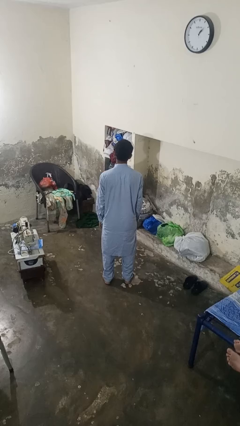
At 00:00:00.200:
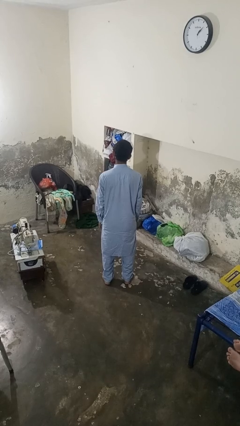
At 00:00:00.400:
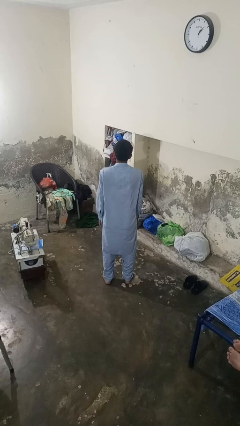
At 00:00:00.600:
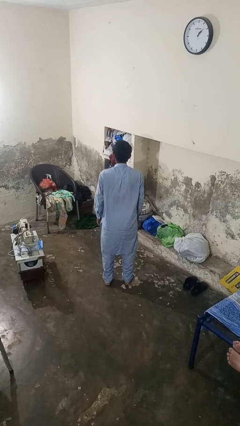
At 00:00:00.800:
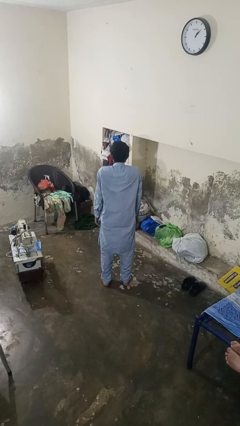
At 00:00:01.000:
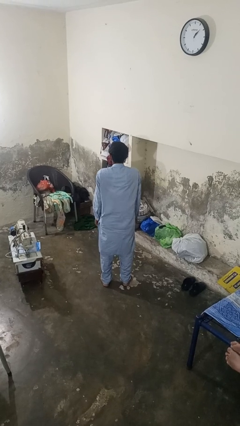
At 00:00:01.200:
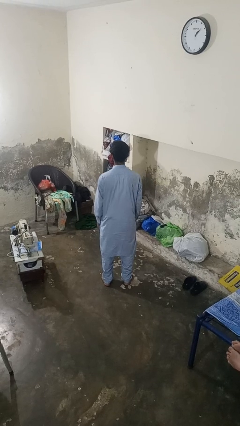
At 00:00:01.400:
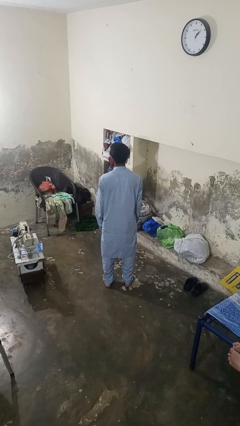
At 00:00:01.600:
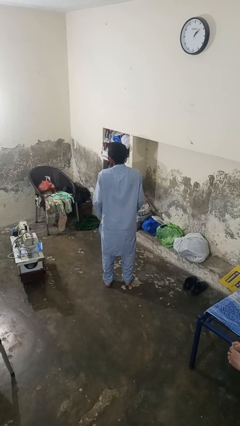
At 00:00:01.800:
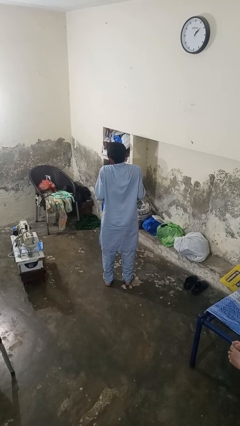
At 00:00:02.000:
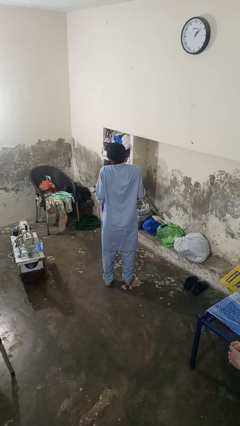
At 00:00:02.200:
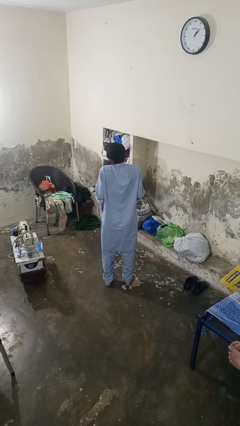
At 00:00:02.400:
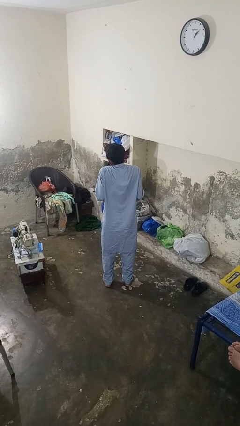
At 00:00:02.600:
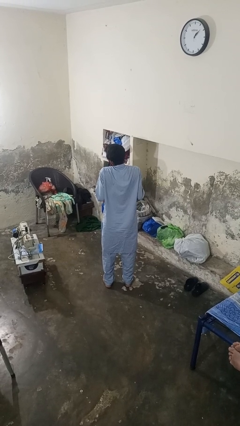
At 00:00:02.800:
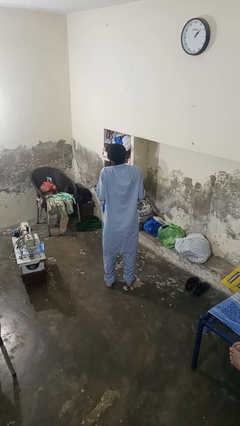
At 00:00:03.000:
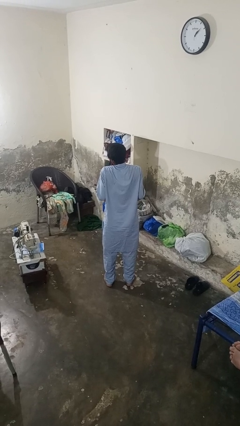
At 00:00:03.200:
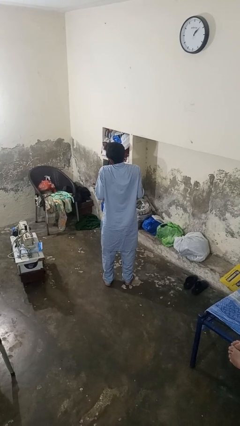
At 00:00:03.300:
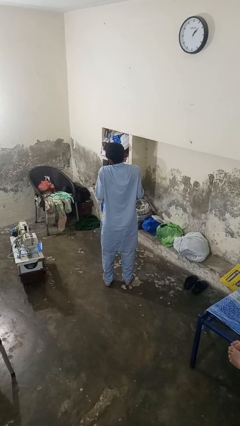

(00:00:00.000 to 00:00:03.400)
person shrugs

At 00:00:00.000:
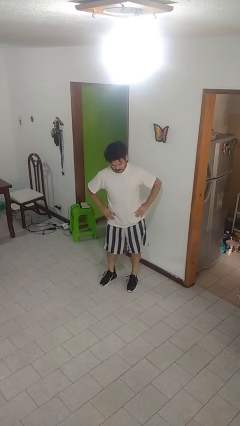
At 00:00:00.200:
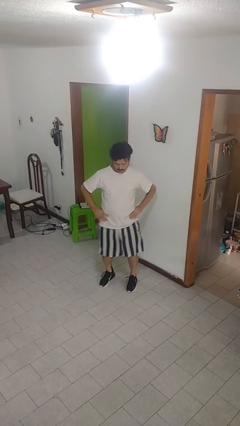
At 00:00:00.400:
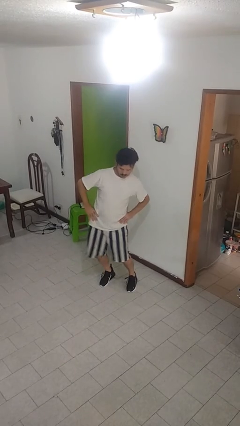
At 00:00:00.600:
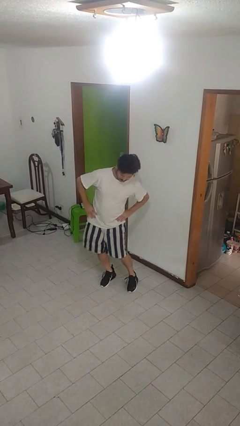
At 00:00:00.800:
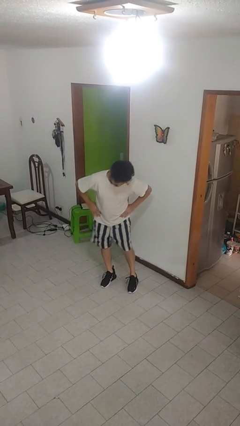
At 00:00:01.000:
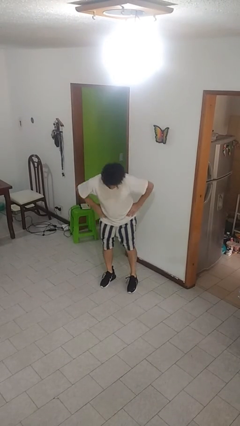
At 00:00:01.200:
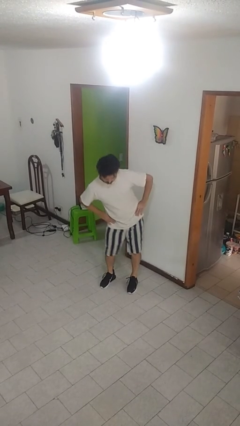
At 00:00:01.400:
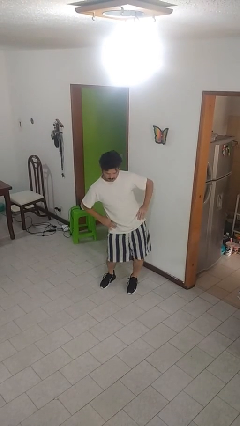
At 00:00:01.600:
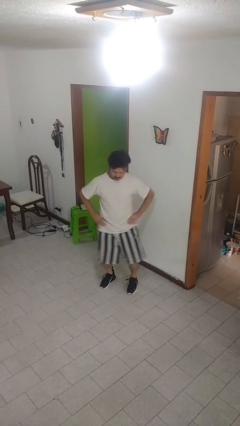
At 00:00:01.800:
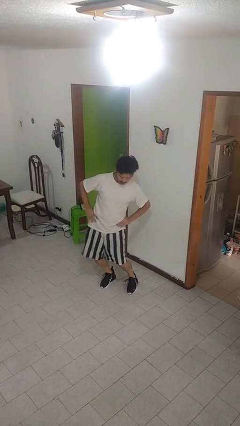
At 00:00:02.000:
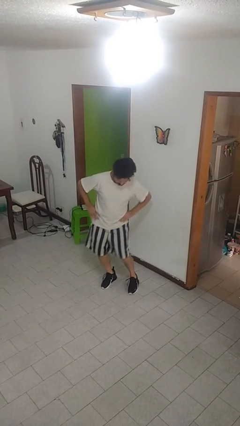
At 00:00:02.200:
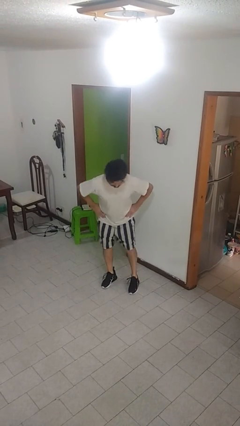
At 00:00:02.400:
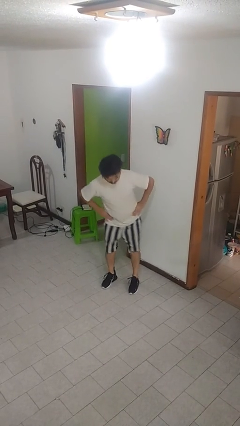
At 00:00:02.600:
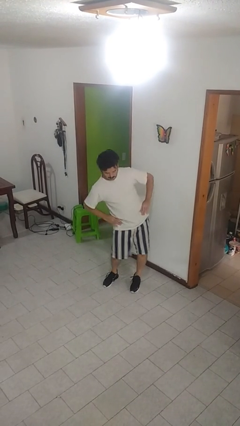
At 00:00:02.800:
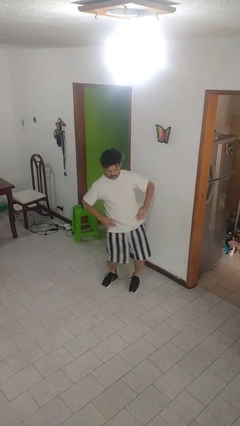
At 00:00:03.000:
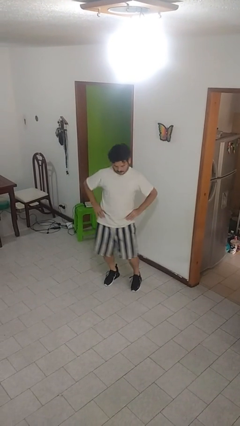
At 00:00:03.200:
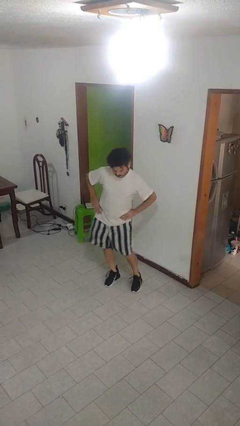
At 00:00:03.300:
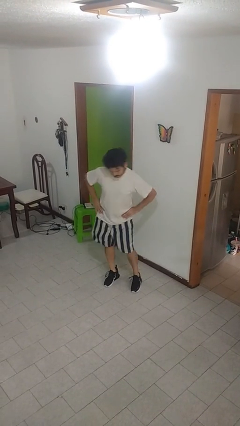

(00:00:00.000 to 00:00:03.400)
person wiggles hips

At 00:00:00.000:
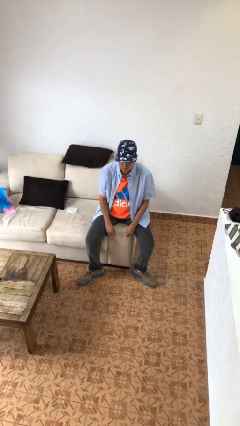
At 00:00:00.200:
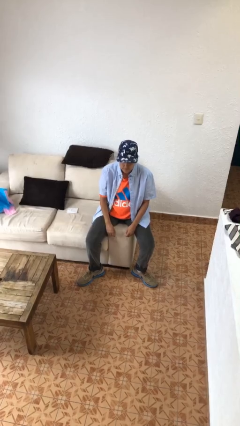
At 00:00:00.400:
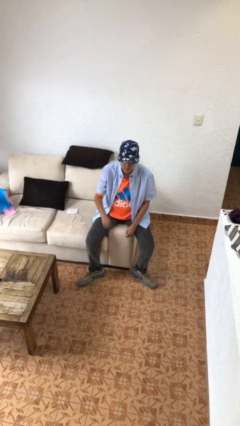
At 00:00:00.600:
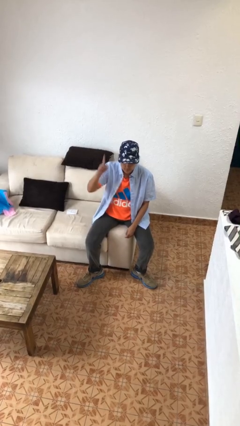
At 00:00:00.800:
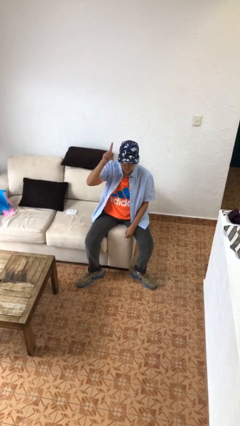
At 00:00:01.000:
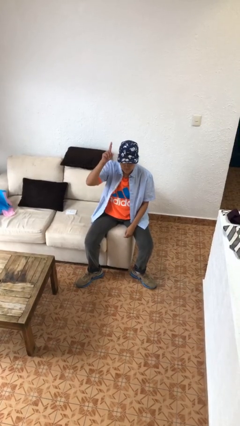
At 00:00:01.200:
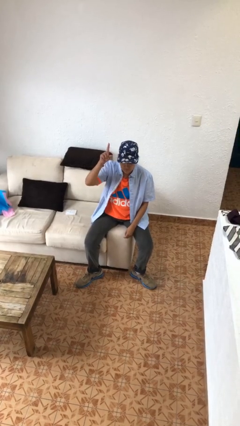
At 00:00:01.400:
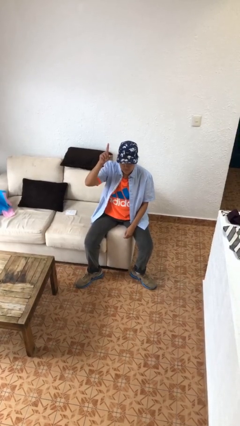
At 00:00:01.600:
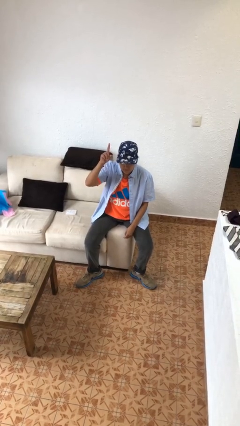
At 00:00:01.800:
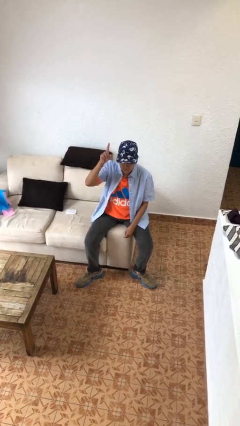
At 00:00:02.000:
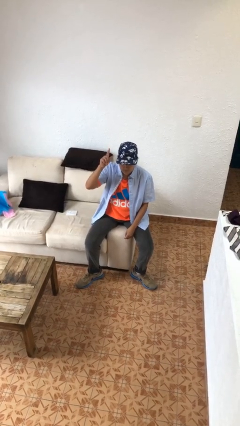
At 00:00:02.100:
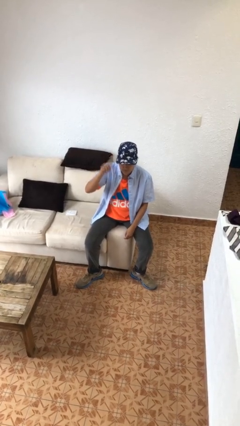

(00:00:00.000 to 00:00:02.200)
person gestures number one

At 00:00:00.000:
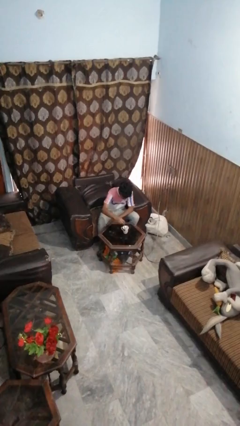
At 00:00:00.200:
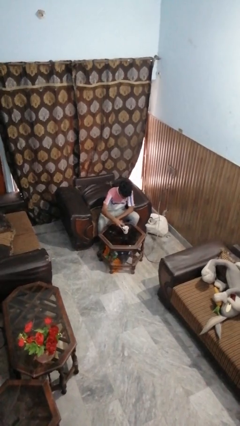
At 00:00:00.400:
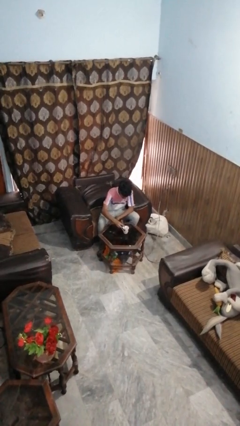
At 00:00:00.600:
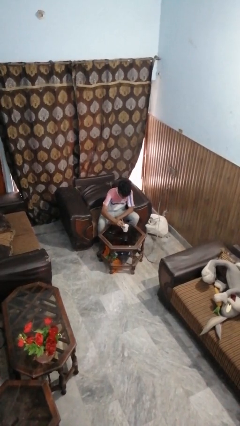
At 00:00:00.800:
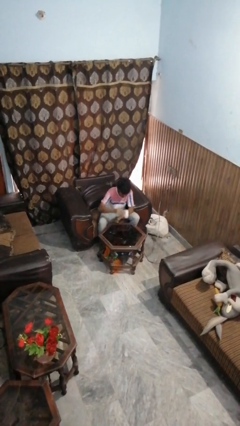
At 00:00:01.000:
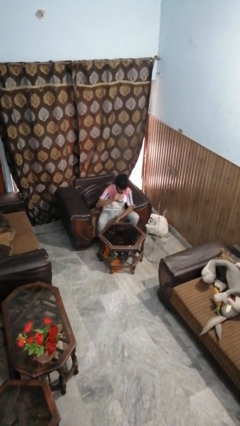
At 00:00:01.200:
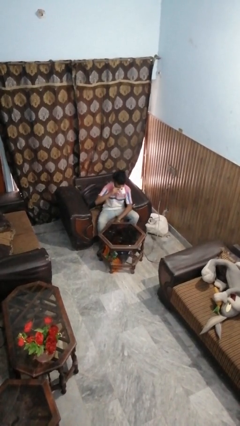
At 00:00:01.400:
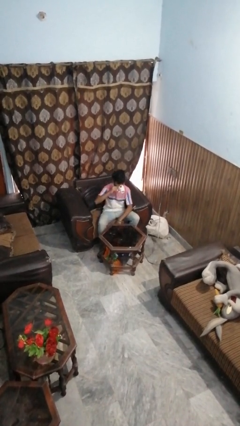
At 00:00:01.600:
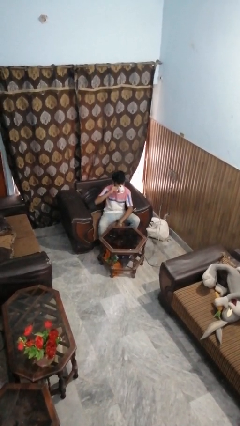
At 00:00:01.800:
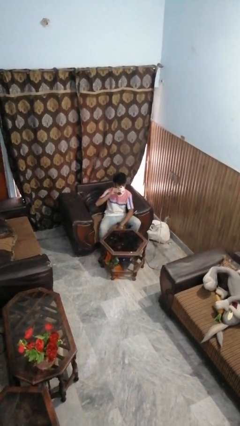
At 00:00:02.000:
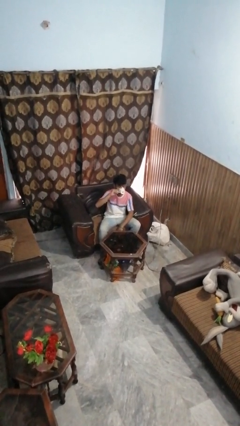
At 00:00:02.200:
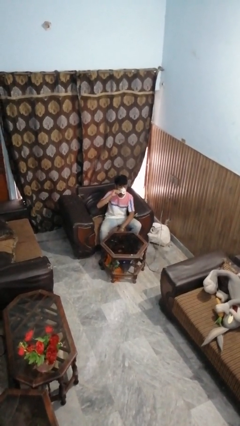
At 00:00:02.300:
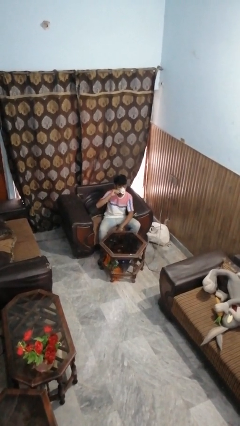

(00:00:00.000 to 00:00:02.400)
person drinks from mug

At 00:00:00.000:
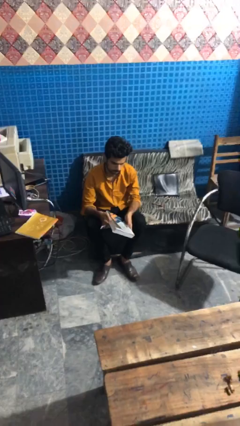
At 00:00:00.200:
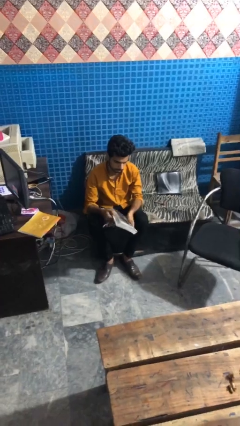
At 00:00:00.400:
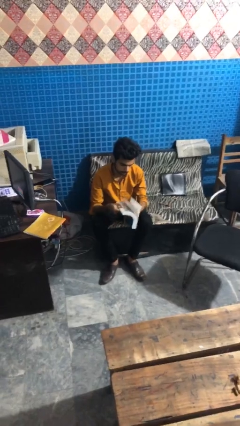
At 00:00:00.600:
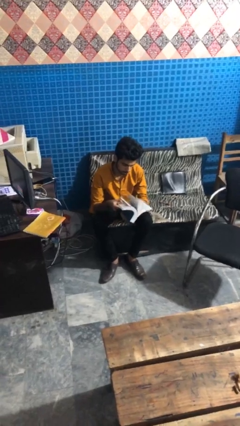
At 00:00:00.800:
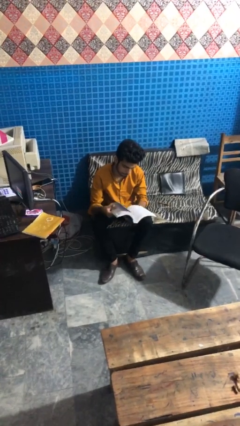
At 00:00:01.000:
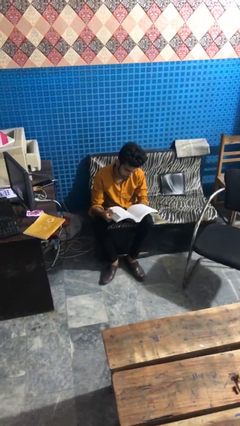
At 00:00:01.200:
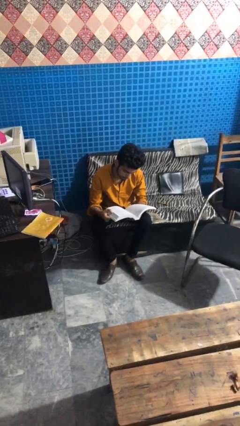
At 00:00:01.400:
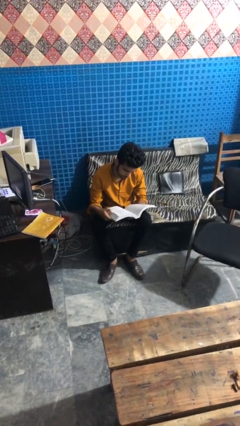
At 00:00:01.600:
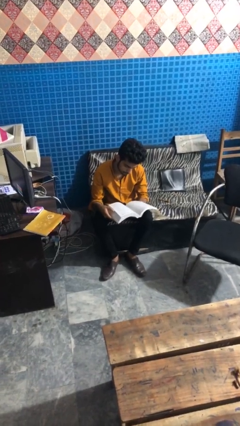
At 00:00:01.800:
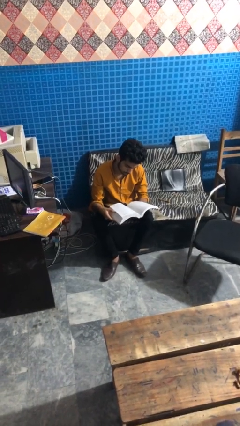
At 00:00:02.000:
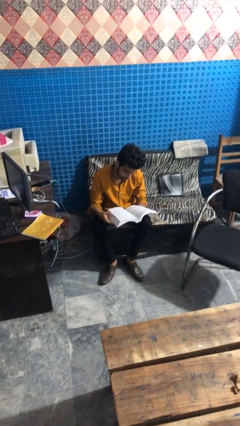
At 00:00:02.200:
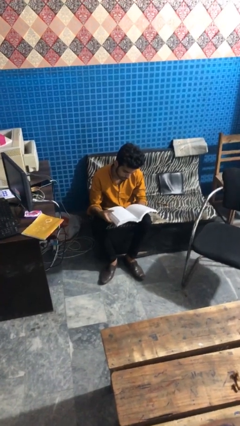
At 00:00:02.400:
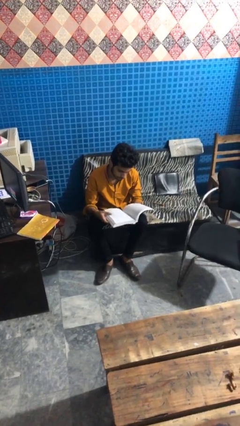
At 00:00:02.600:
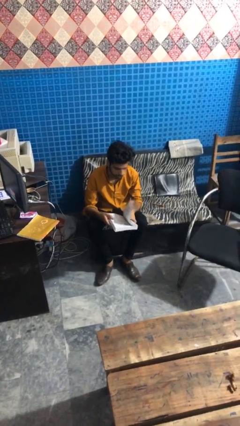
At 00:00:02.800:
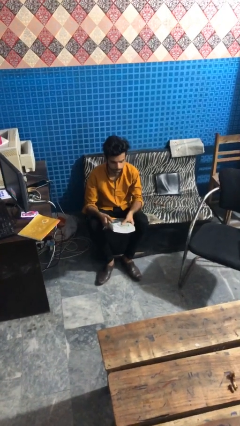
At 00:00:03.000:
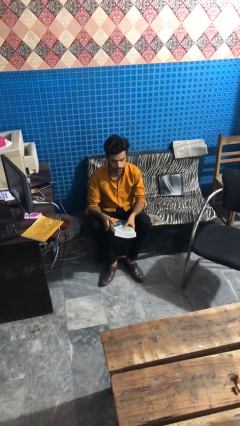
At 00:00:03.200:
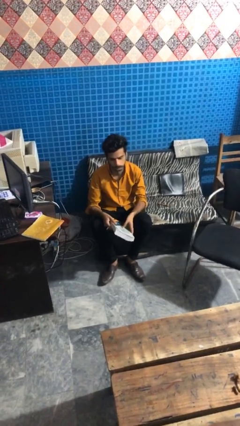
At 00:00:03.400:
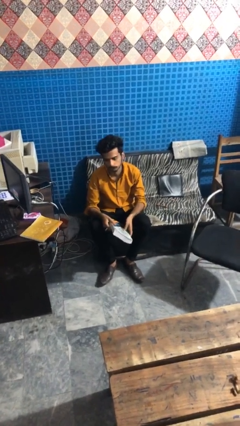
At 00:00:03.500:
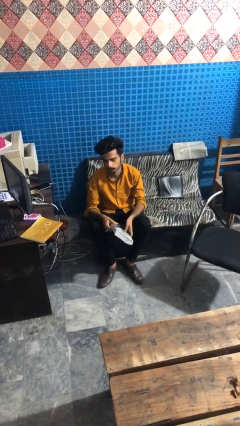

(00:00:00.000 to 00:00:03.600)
person reads book

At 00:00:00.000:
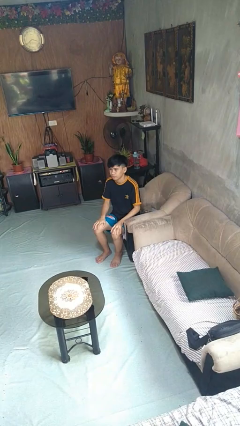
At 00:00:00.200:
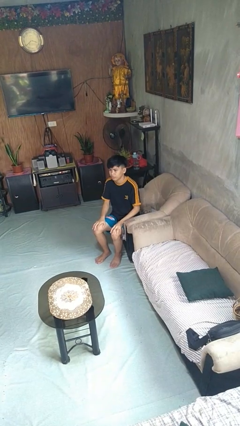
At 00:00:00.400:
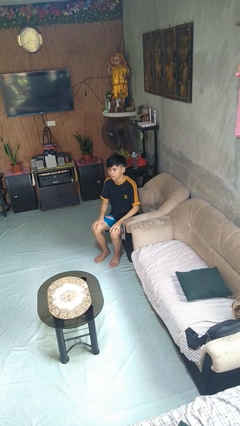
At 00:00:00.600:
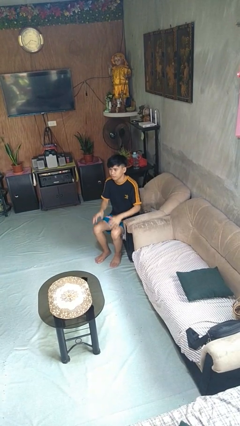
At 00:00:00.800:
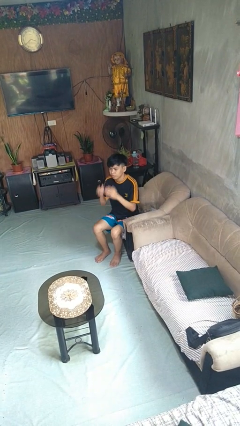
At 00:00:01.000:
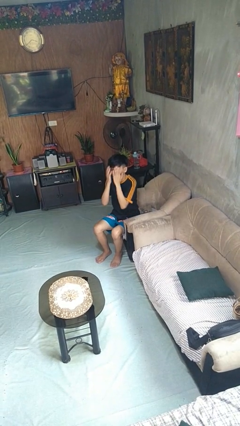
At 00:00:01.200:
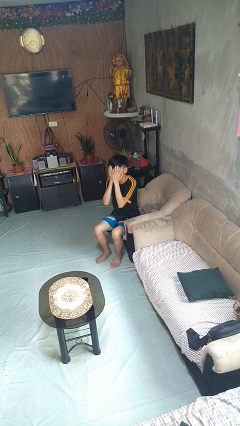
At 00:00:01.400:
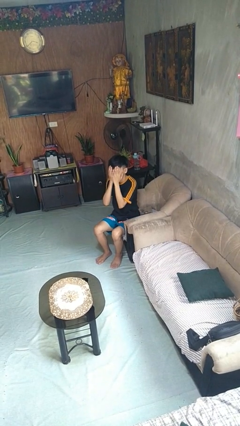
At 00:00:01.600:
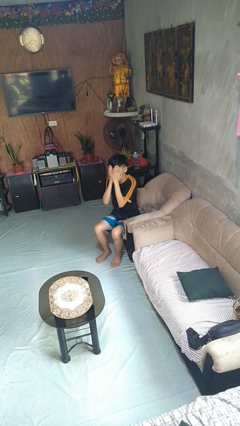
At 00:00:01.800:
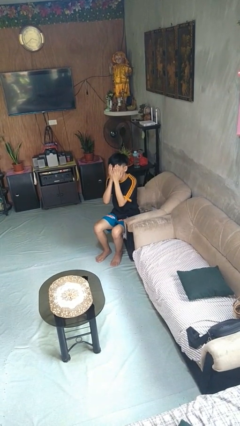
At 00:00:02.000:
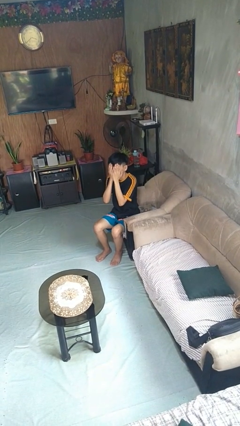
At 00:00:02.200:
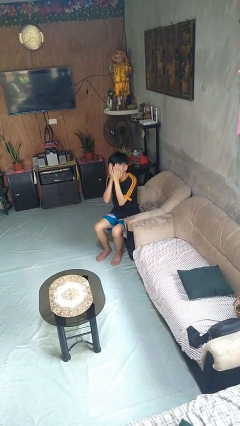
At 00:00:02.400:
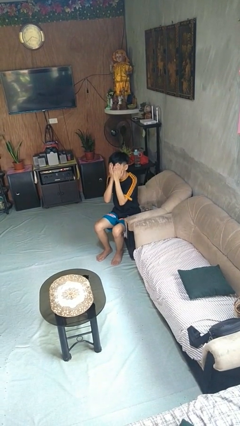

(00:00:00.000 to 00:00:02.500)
person covers face with hands
